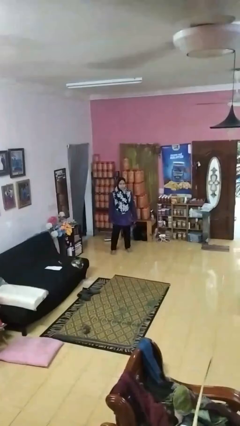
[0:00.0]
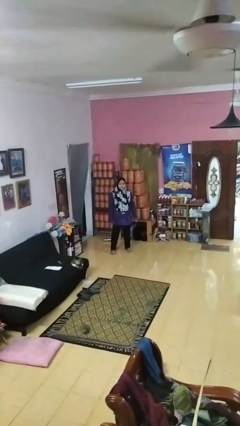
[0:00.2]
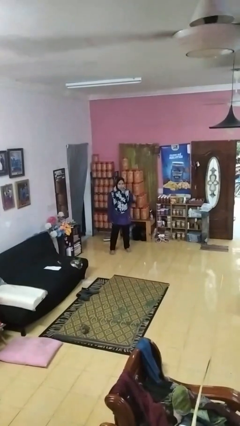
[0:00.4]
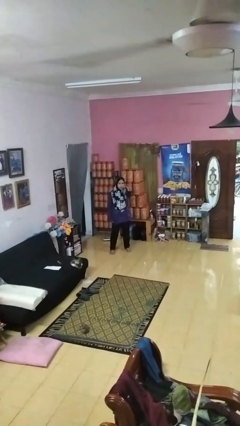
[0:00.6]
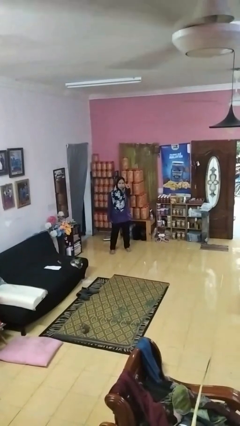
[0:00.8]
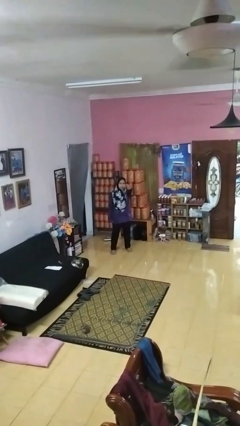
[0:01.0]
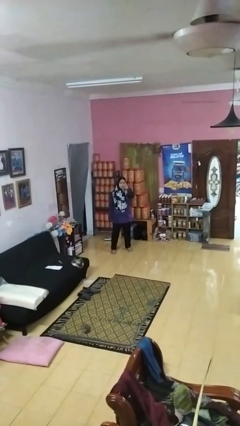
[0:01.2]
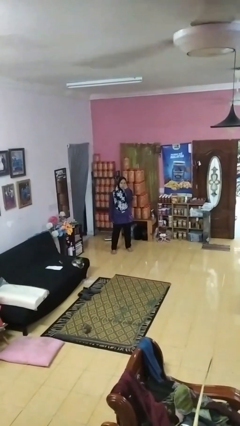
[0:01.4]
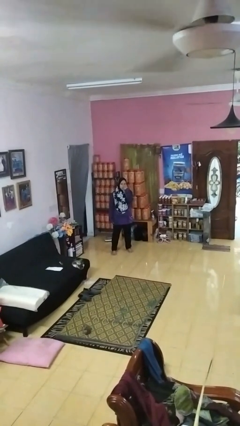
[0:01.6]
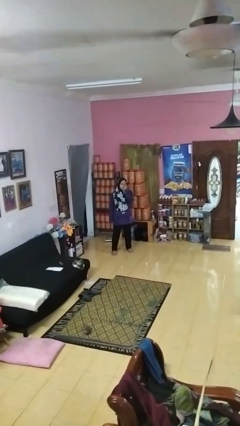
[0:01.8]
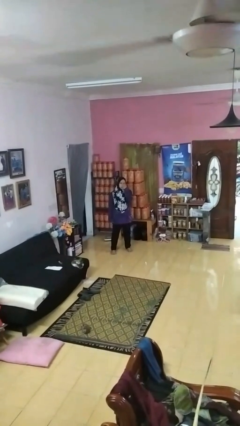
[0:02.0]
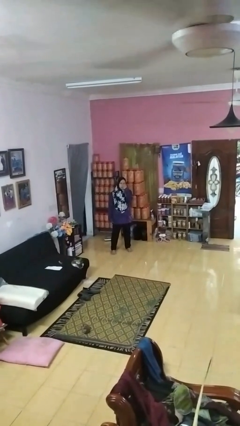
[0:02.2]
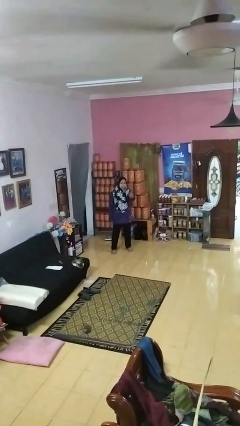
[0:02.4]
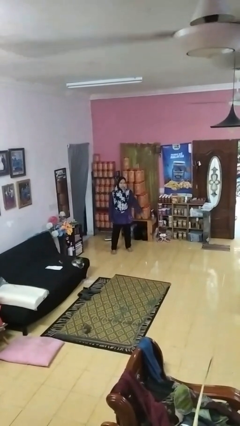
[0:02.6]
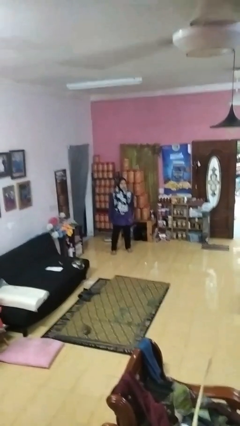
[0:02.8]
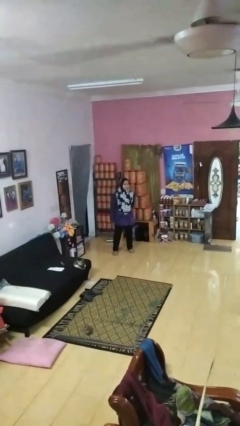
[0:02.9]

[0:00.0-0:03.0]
person gestures watch closely

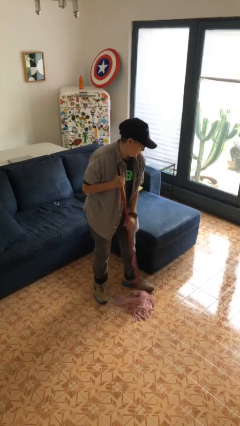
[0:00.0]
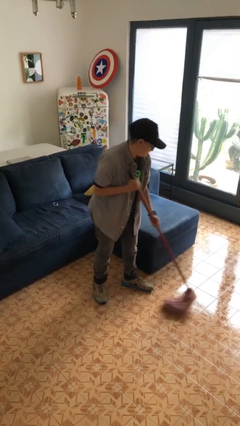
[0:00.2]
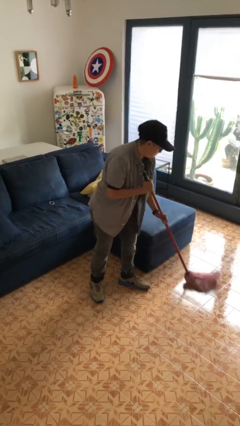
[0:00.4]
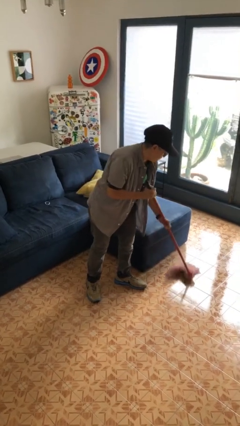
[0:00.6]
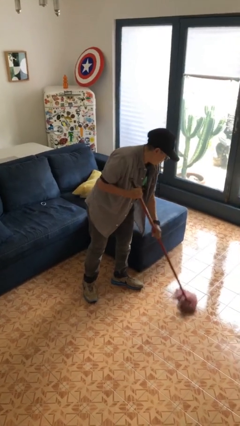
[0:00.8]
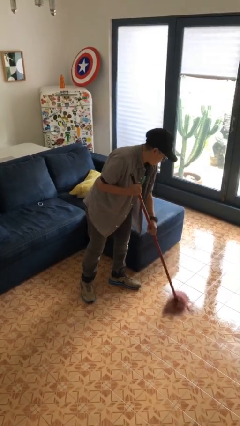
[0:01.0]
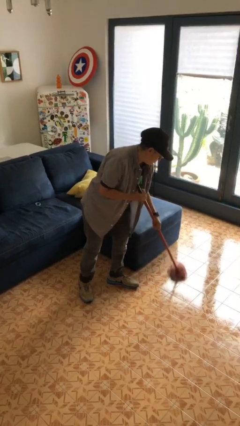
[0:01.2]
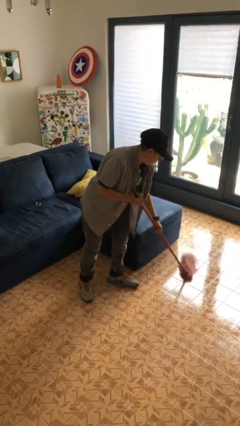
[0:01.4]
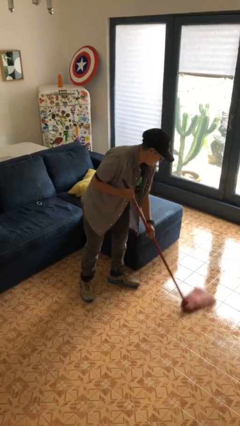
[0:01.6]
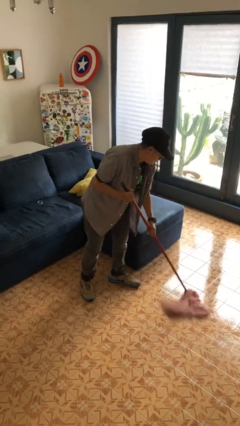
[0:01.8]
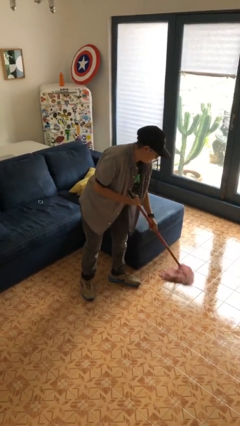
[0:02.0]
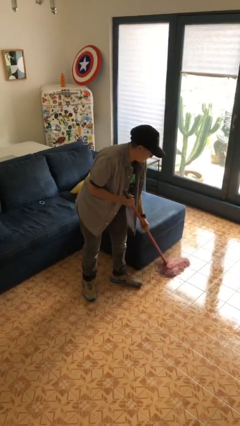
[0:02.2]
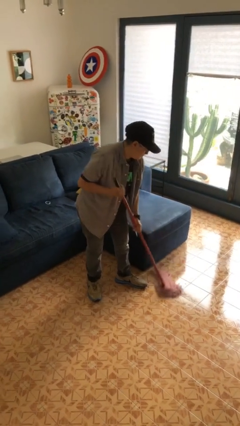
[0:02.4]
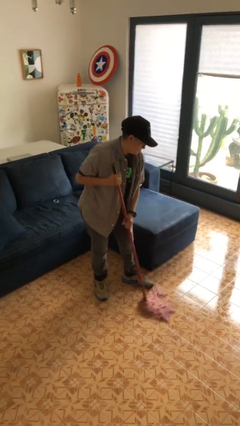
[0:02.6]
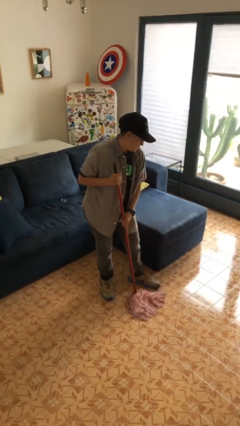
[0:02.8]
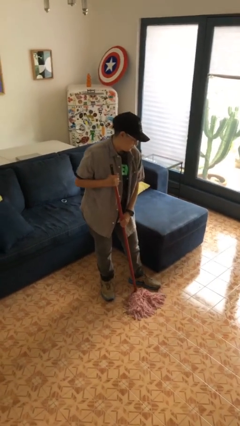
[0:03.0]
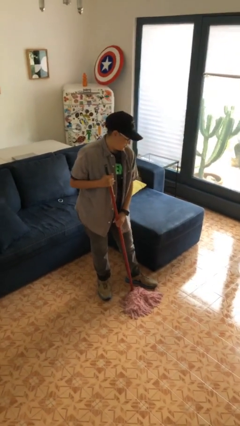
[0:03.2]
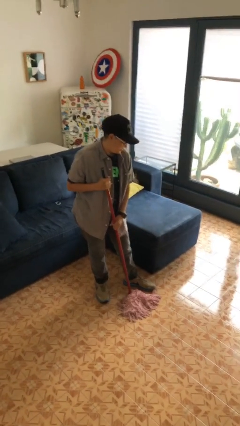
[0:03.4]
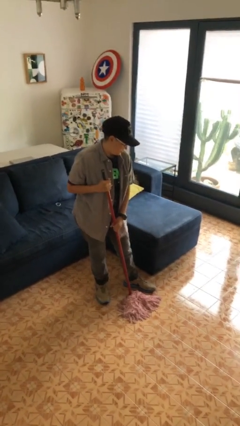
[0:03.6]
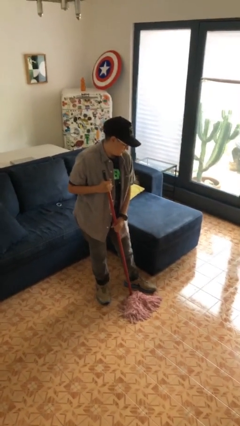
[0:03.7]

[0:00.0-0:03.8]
person mops

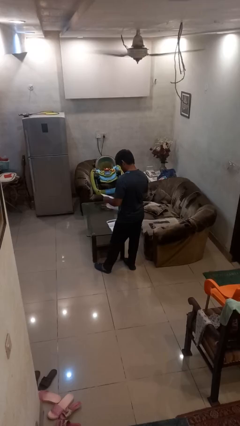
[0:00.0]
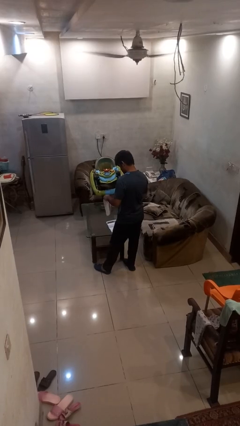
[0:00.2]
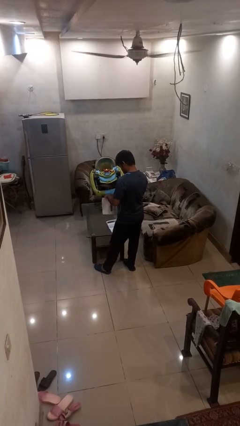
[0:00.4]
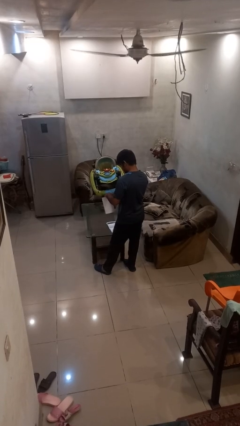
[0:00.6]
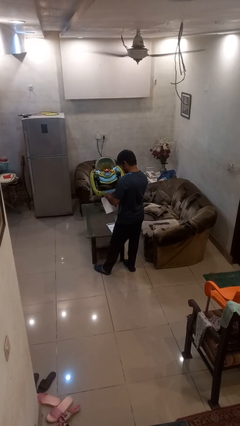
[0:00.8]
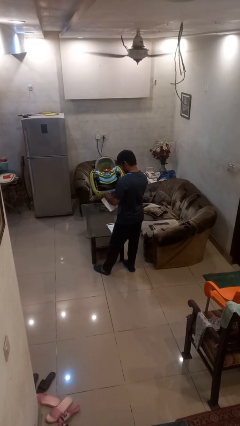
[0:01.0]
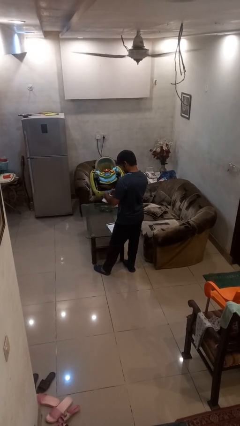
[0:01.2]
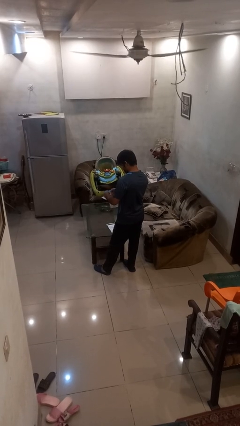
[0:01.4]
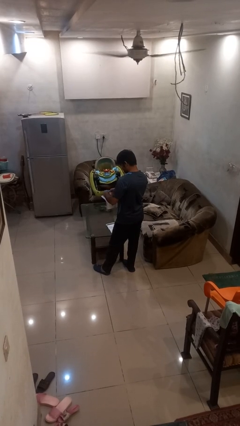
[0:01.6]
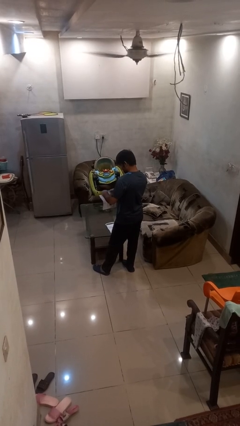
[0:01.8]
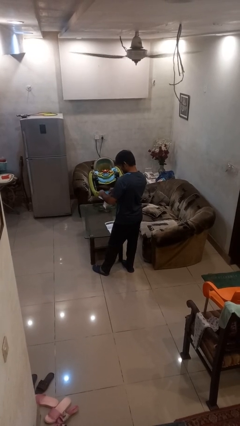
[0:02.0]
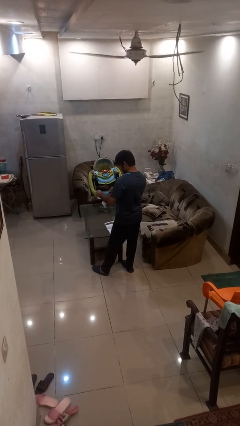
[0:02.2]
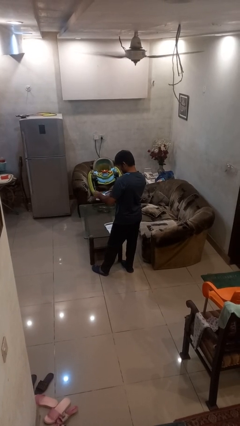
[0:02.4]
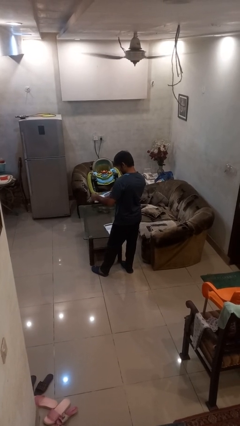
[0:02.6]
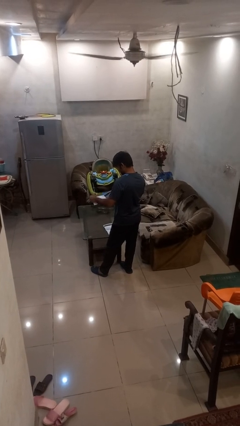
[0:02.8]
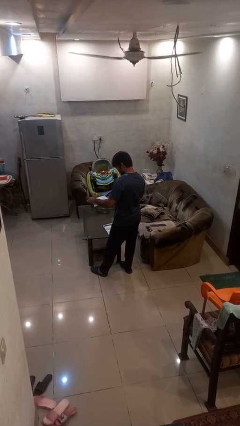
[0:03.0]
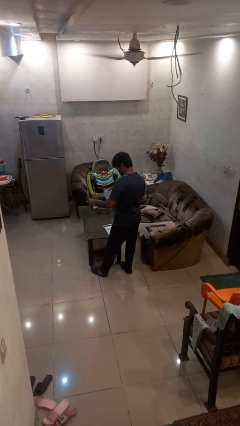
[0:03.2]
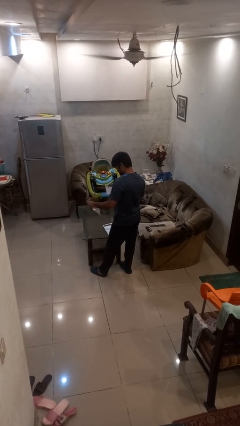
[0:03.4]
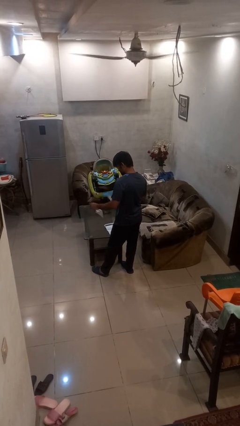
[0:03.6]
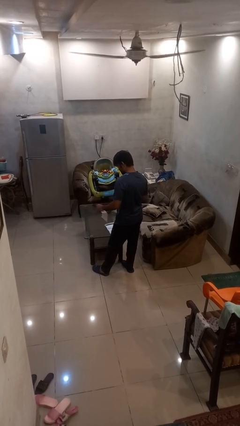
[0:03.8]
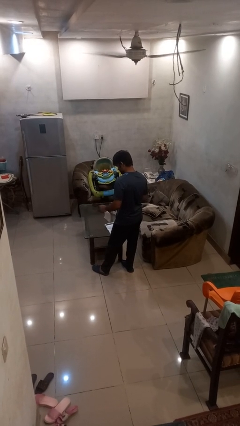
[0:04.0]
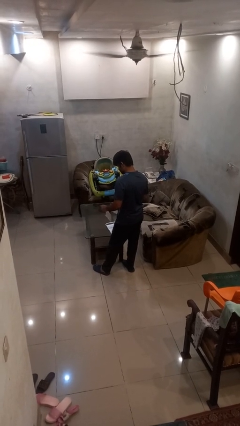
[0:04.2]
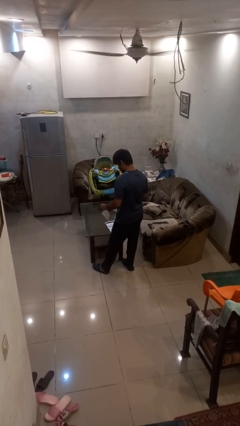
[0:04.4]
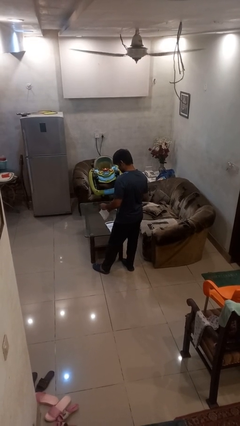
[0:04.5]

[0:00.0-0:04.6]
person tears paper

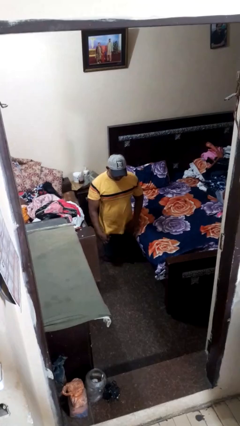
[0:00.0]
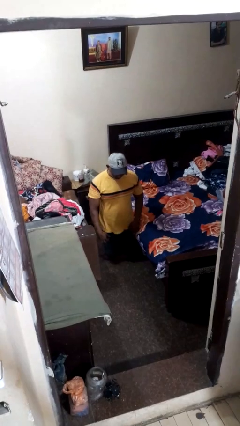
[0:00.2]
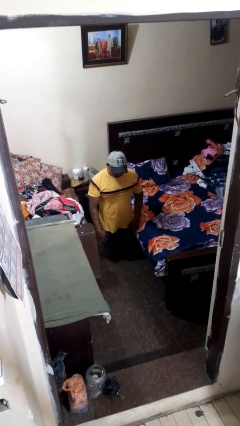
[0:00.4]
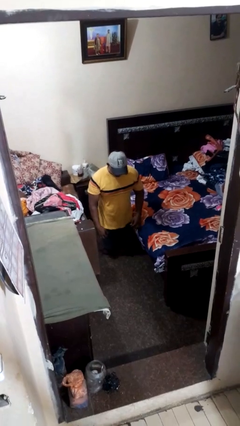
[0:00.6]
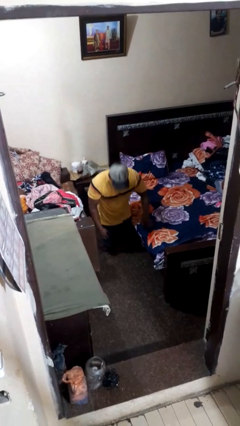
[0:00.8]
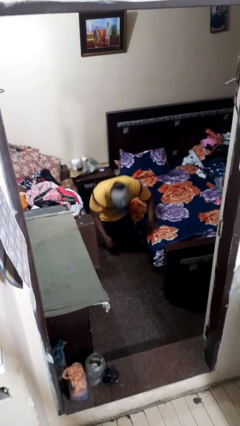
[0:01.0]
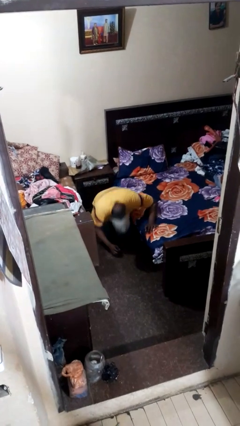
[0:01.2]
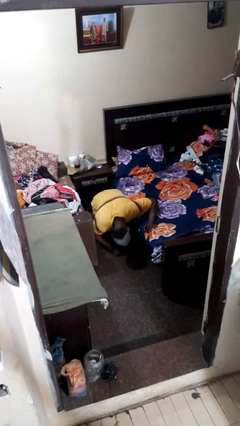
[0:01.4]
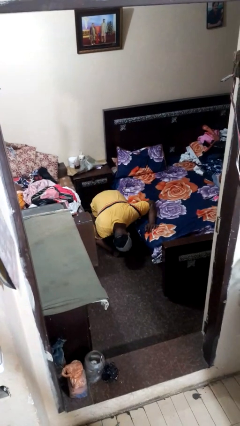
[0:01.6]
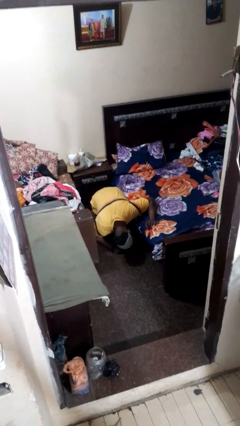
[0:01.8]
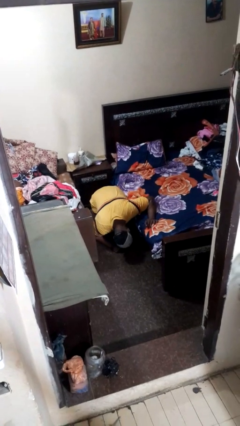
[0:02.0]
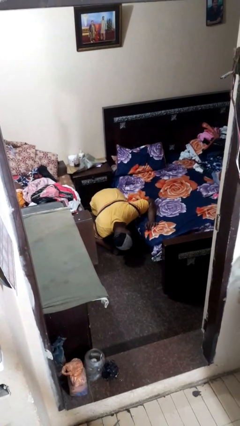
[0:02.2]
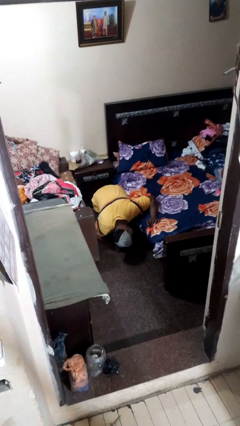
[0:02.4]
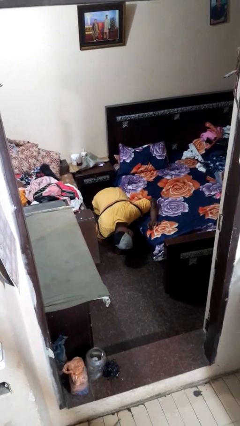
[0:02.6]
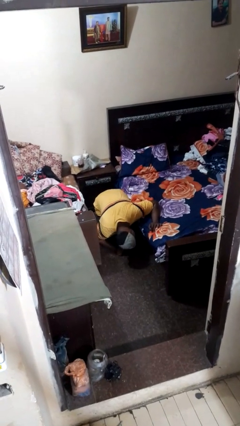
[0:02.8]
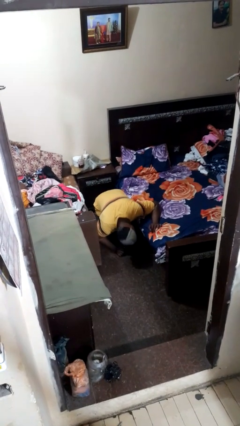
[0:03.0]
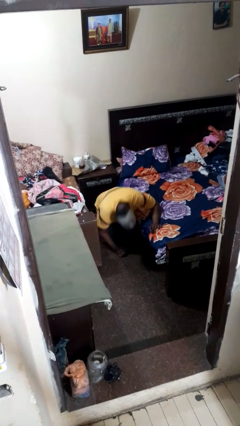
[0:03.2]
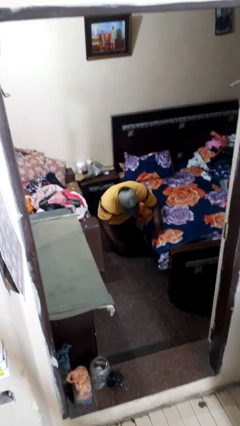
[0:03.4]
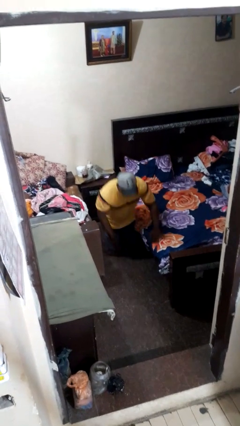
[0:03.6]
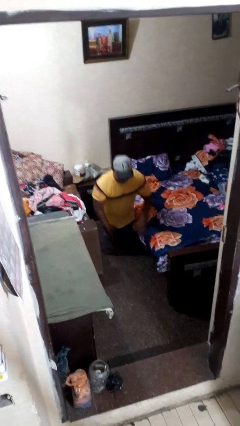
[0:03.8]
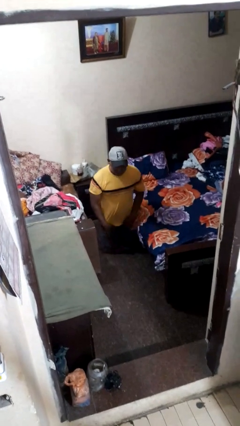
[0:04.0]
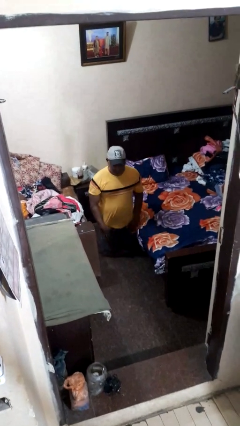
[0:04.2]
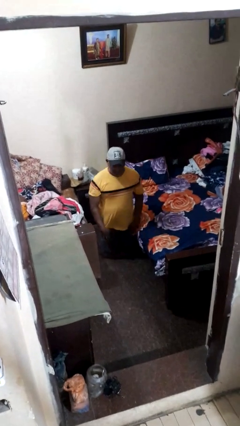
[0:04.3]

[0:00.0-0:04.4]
person searches under bed

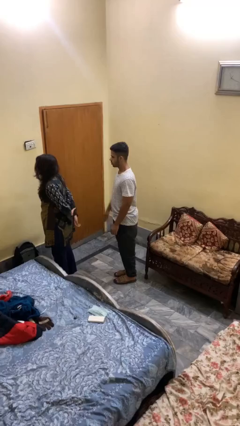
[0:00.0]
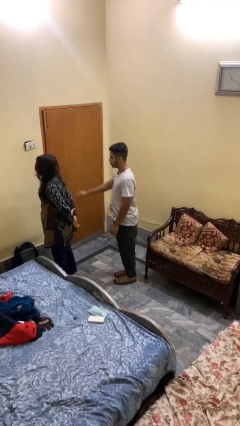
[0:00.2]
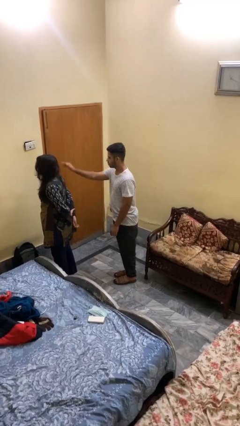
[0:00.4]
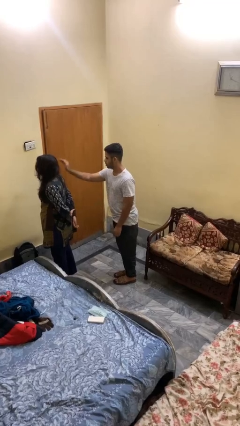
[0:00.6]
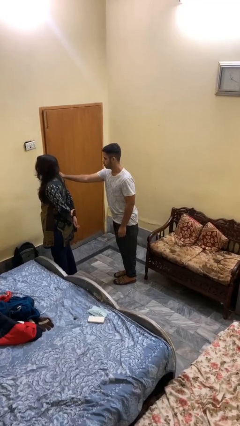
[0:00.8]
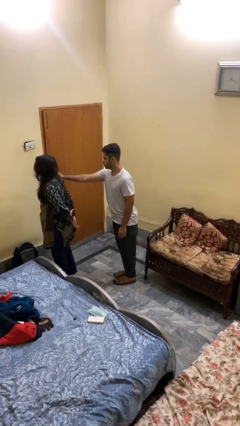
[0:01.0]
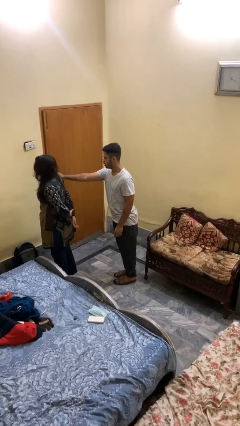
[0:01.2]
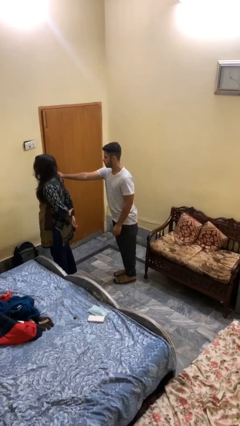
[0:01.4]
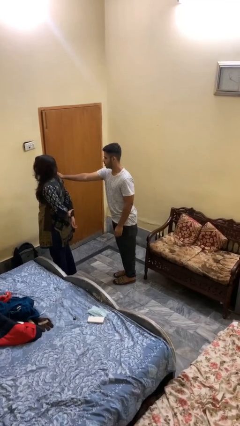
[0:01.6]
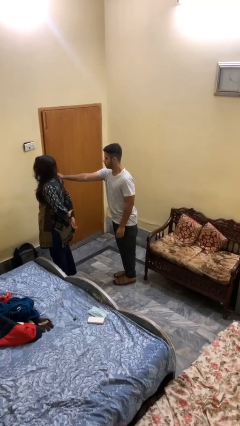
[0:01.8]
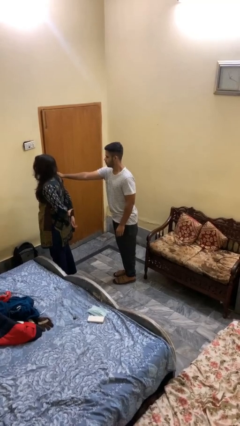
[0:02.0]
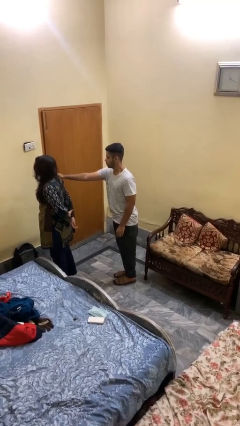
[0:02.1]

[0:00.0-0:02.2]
person grabs person by shoulder
